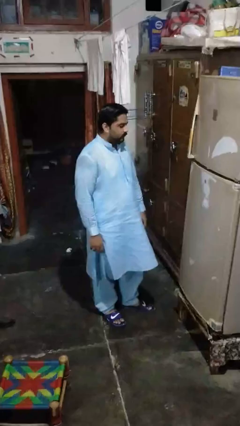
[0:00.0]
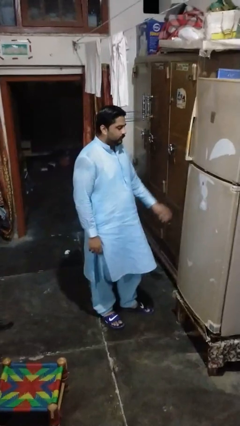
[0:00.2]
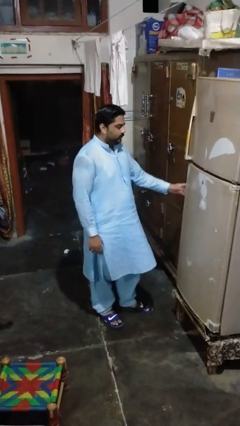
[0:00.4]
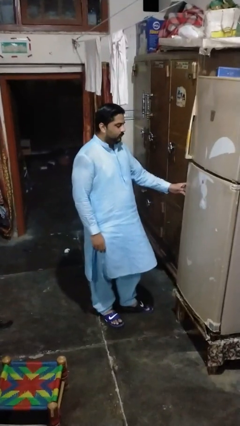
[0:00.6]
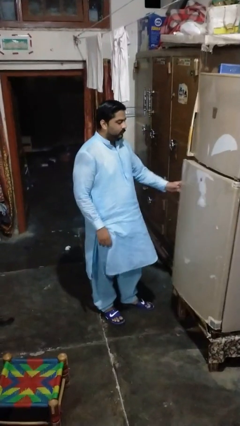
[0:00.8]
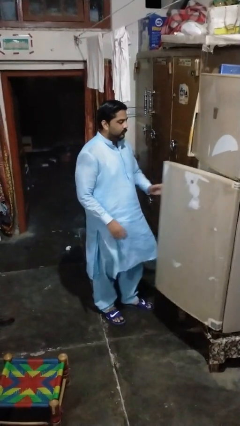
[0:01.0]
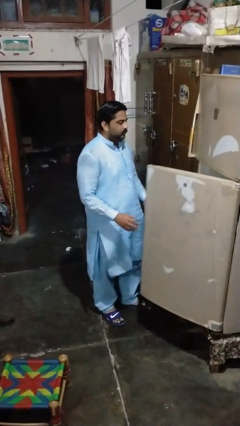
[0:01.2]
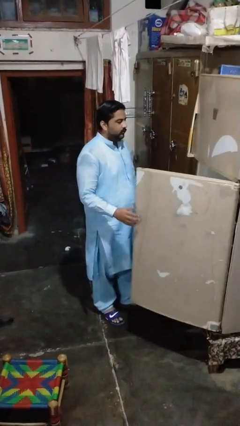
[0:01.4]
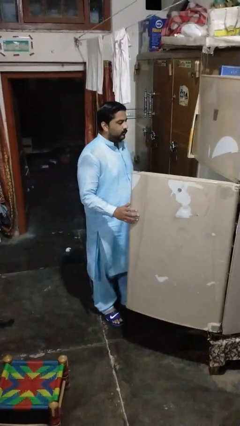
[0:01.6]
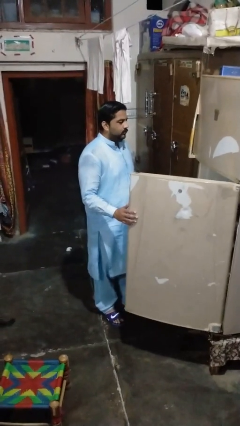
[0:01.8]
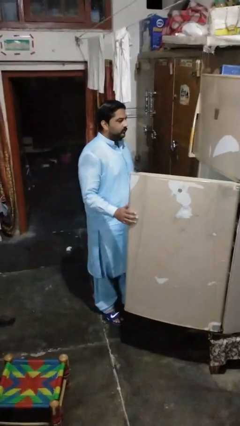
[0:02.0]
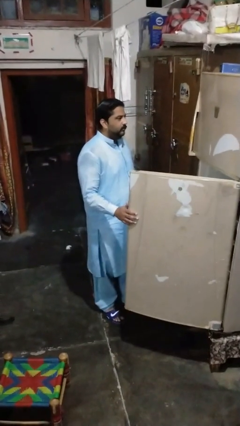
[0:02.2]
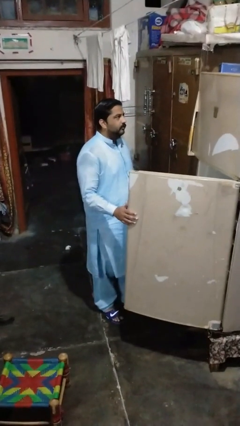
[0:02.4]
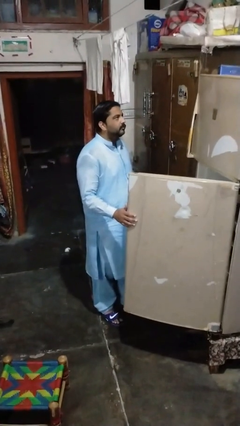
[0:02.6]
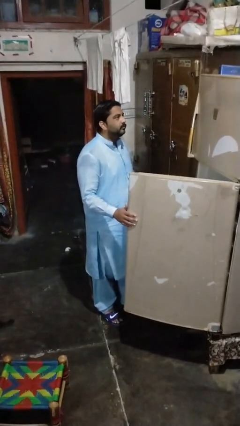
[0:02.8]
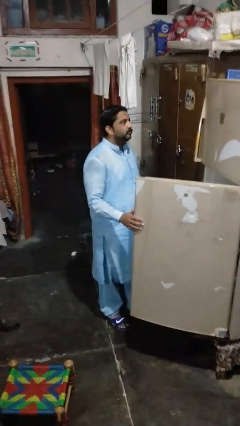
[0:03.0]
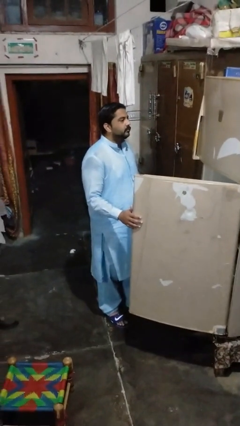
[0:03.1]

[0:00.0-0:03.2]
person opens refrigerator

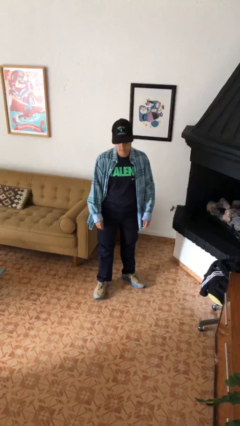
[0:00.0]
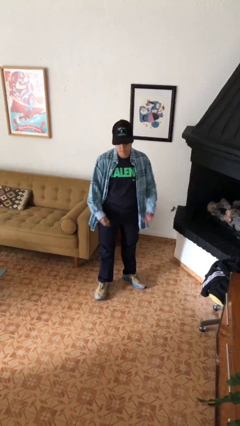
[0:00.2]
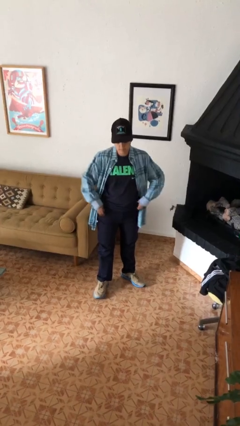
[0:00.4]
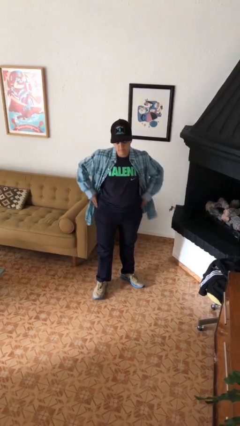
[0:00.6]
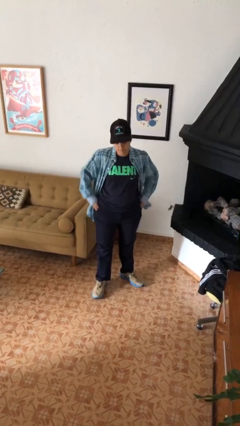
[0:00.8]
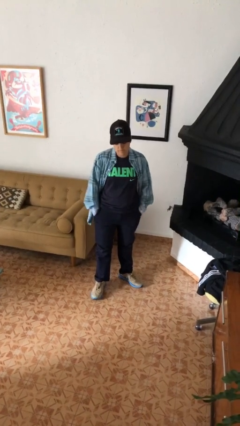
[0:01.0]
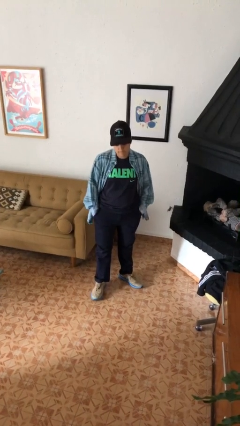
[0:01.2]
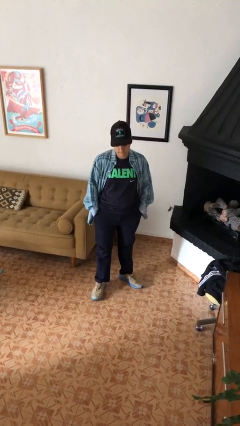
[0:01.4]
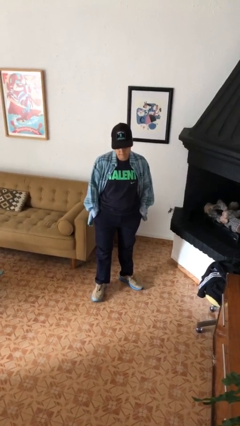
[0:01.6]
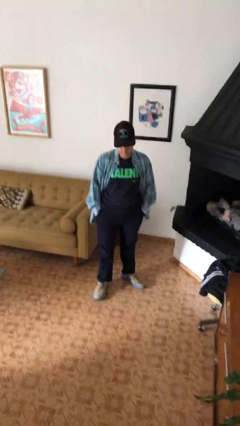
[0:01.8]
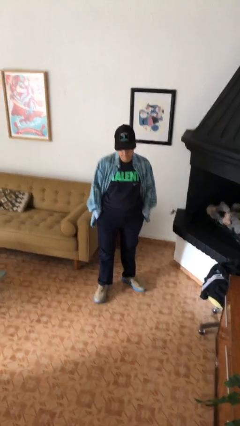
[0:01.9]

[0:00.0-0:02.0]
person puts hands in back pockets

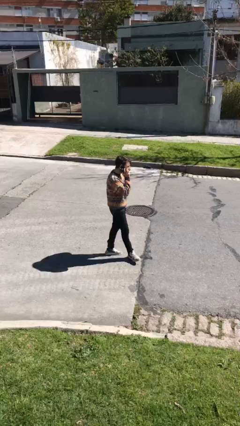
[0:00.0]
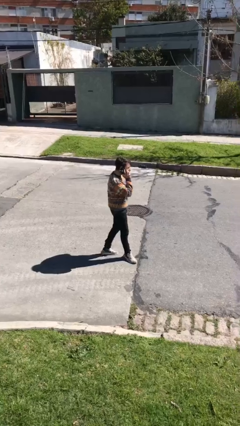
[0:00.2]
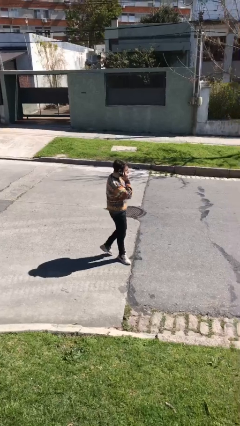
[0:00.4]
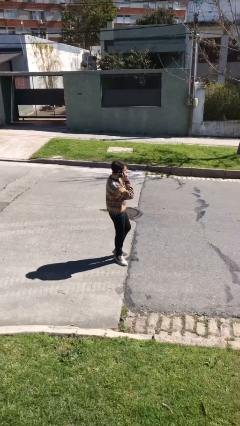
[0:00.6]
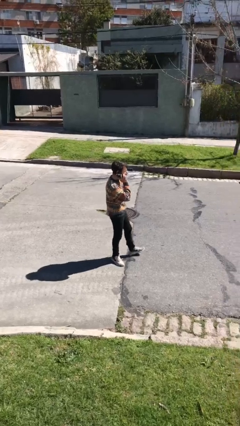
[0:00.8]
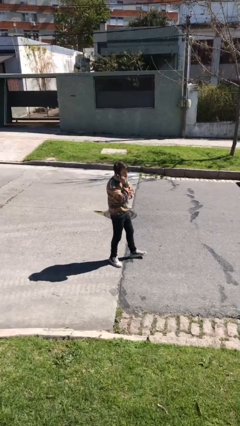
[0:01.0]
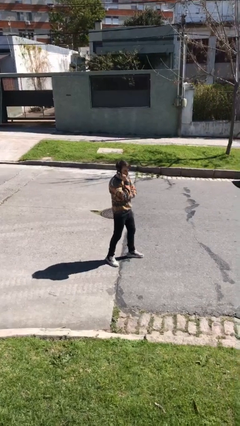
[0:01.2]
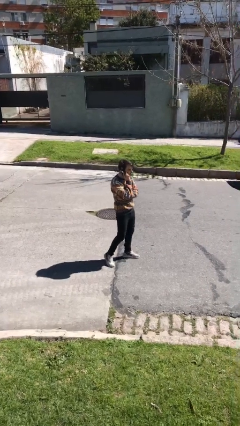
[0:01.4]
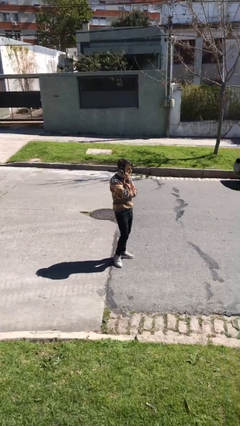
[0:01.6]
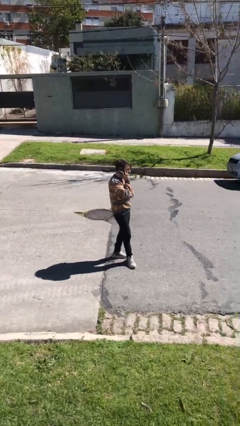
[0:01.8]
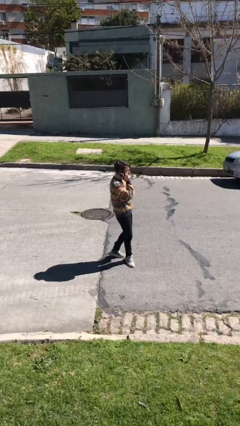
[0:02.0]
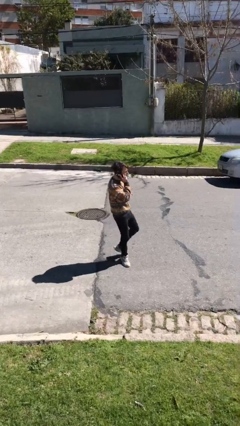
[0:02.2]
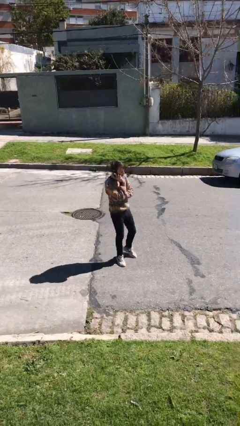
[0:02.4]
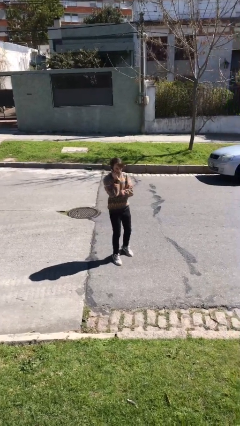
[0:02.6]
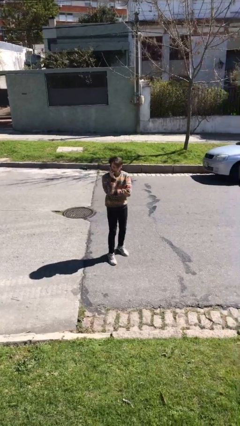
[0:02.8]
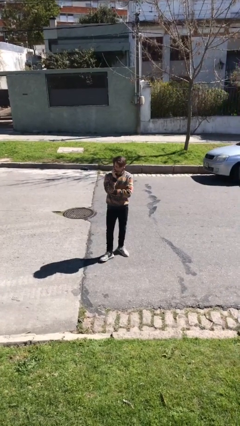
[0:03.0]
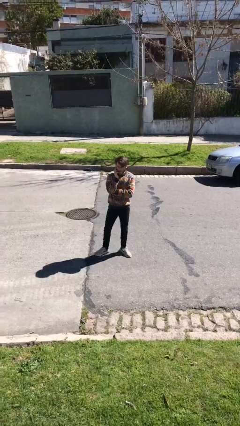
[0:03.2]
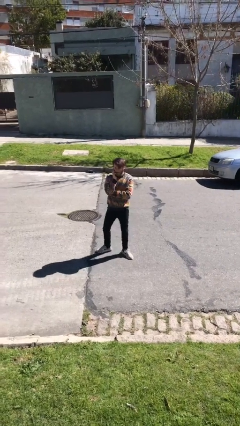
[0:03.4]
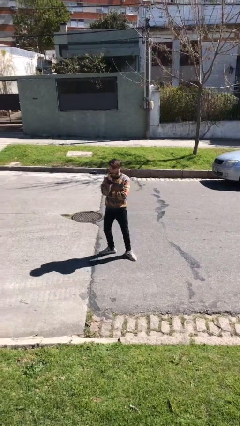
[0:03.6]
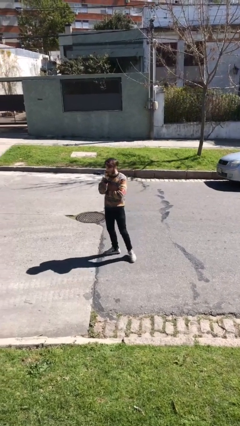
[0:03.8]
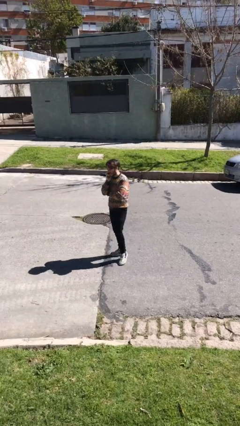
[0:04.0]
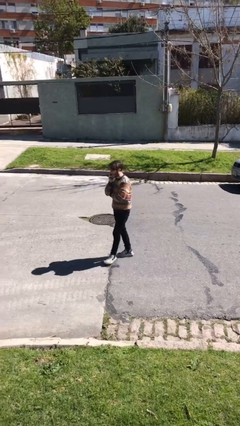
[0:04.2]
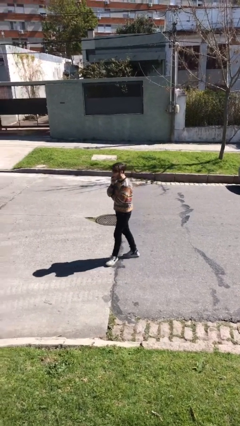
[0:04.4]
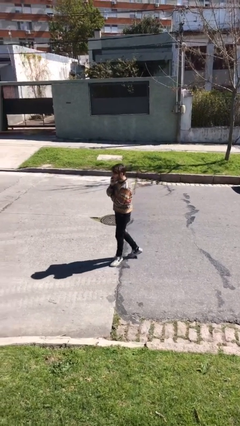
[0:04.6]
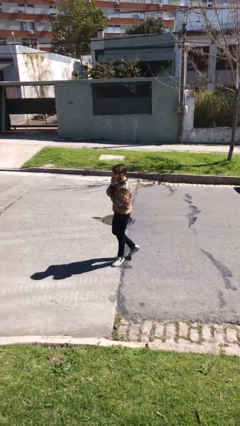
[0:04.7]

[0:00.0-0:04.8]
person talks on phone

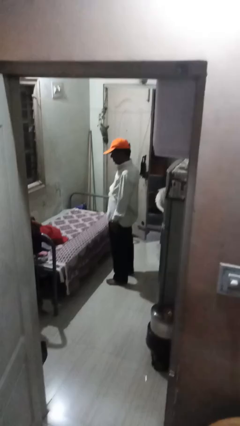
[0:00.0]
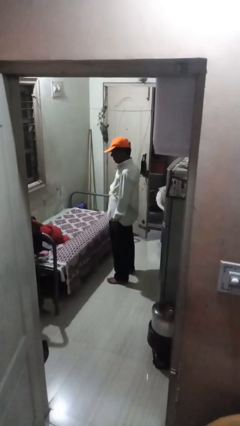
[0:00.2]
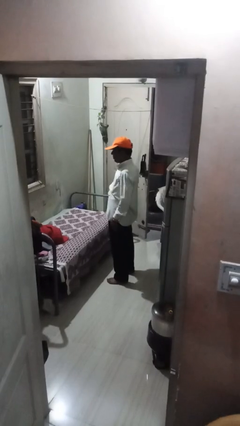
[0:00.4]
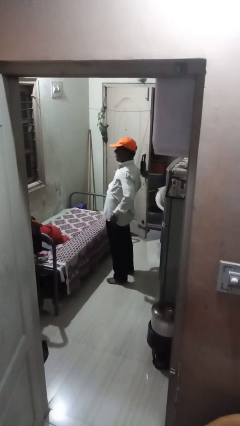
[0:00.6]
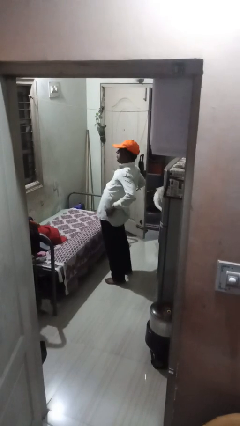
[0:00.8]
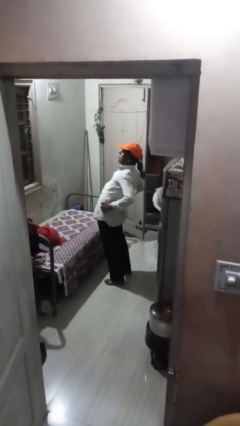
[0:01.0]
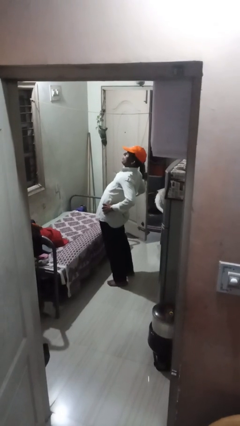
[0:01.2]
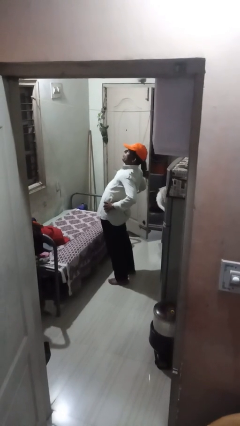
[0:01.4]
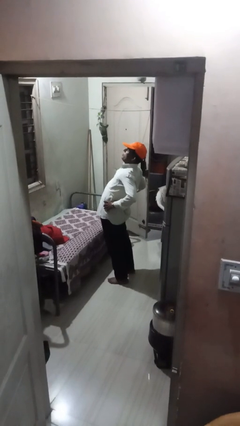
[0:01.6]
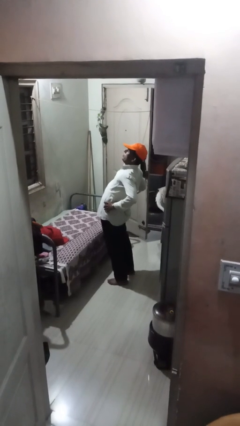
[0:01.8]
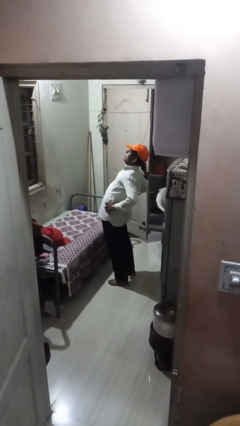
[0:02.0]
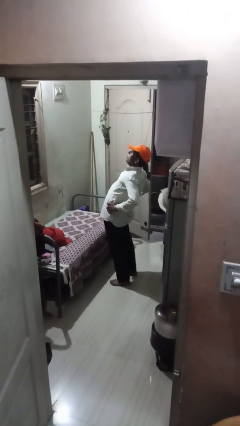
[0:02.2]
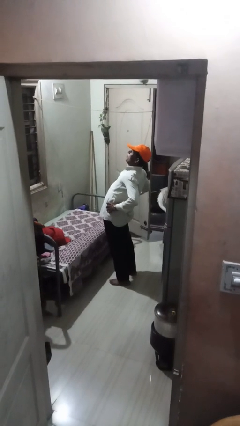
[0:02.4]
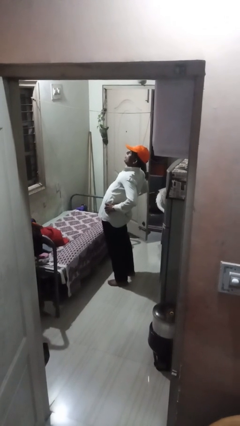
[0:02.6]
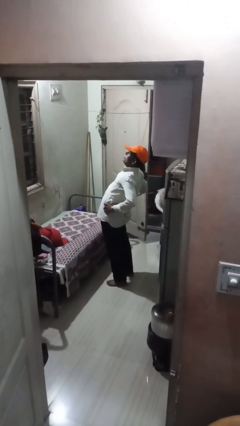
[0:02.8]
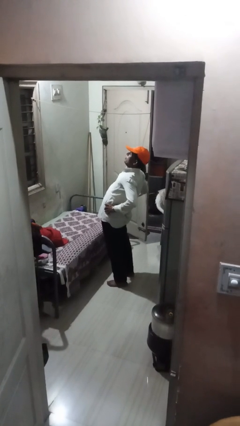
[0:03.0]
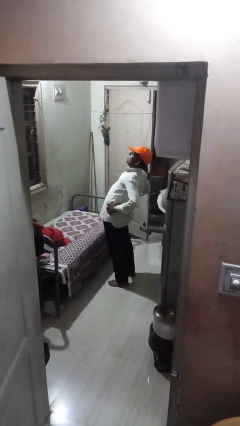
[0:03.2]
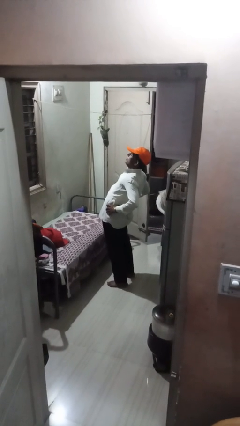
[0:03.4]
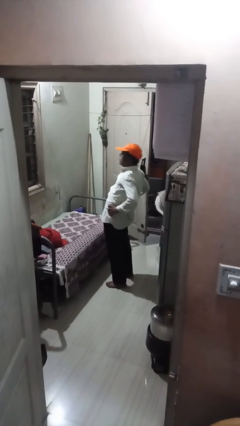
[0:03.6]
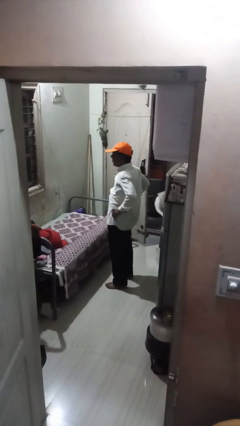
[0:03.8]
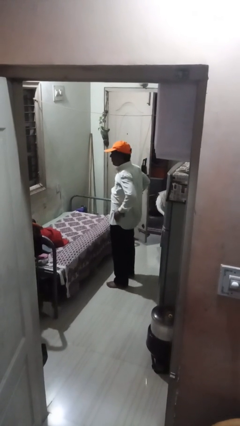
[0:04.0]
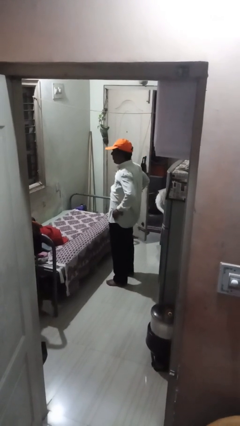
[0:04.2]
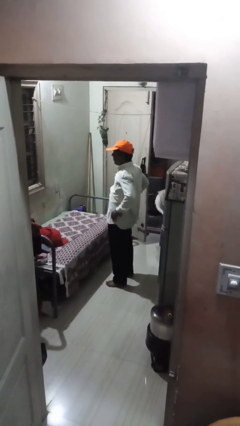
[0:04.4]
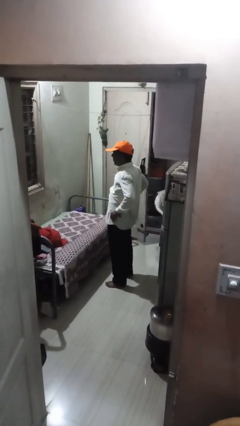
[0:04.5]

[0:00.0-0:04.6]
person stretches back

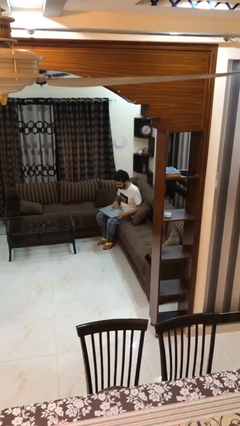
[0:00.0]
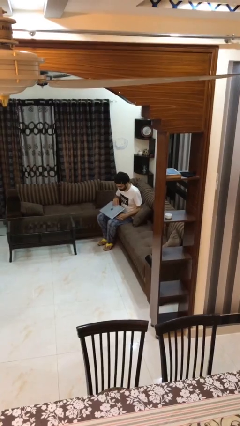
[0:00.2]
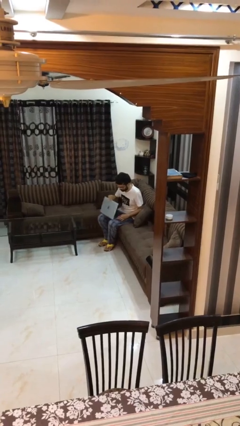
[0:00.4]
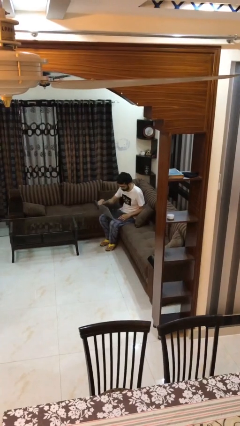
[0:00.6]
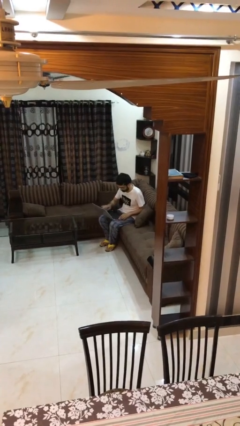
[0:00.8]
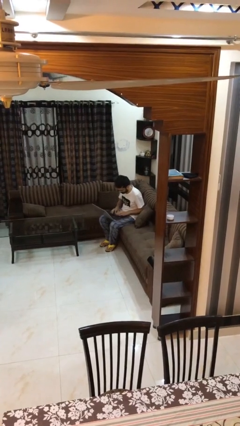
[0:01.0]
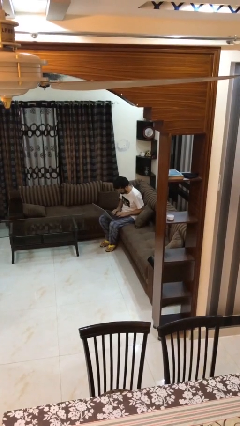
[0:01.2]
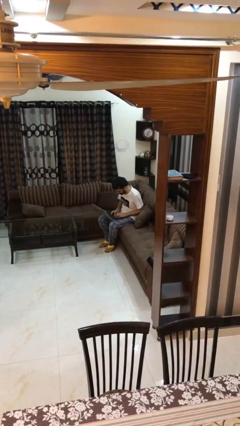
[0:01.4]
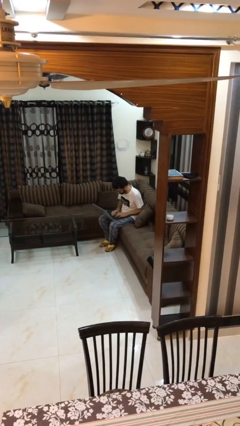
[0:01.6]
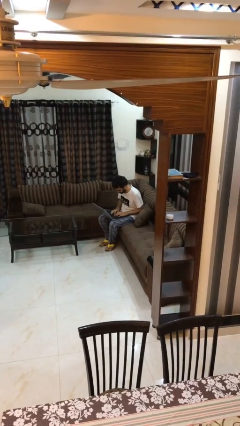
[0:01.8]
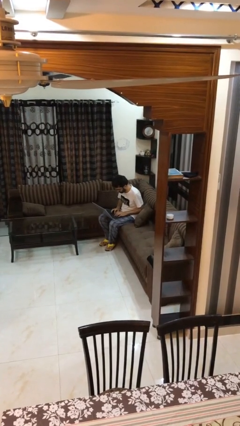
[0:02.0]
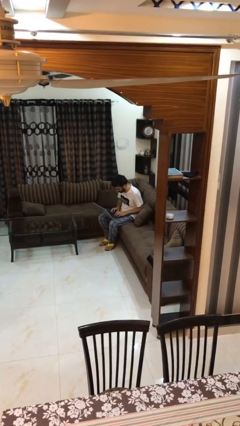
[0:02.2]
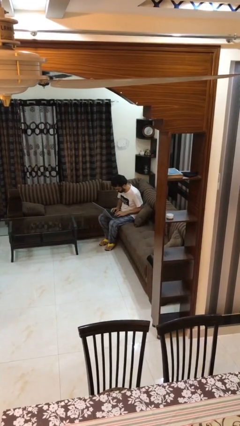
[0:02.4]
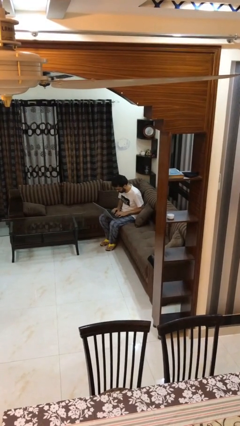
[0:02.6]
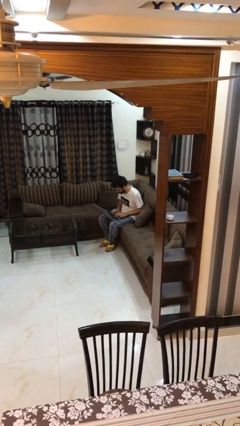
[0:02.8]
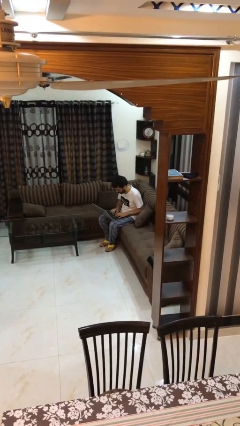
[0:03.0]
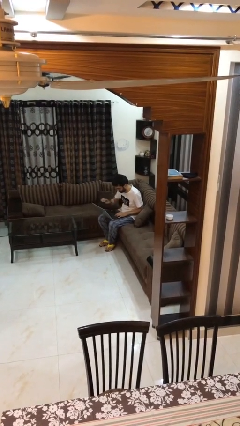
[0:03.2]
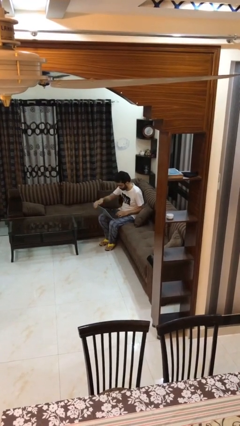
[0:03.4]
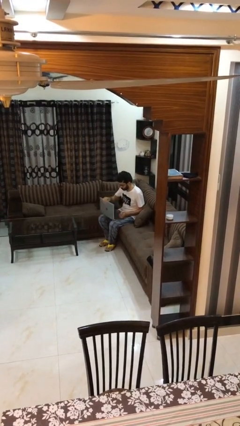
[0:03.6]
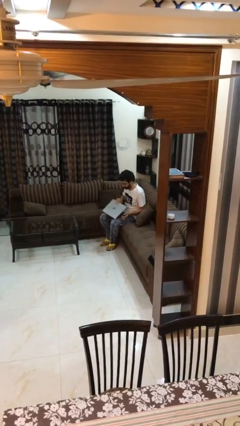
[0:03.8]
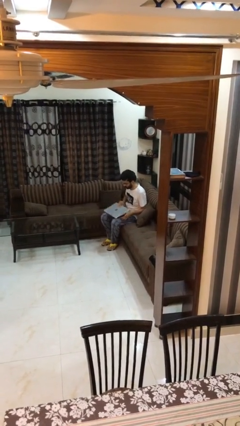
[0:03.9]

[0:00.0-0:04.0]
person interacts with laptop
